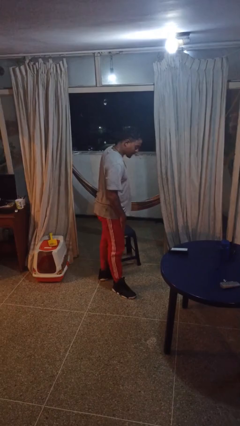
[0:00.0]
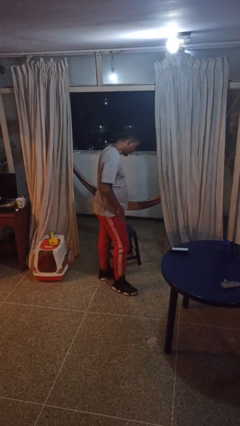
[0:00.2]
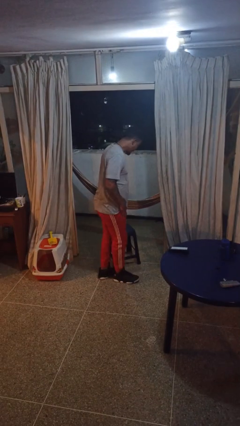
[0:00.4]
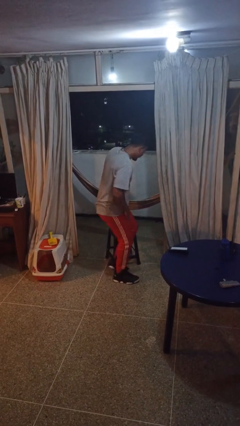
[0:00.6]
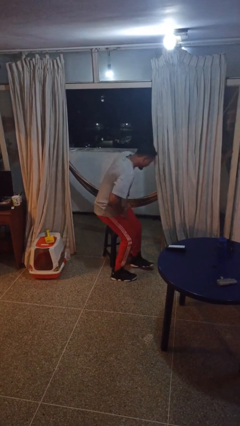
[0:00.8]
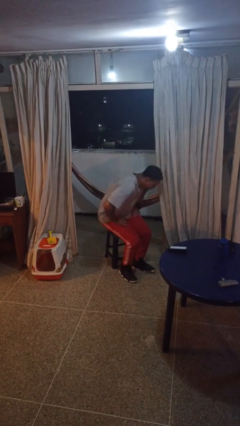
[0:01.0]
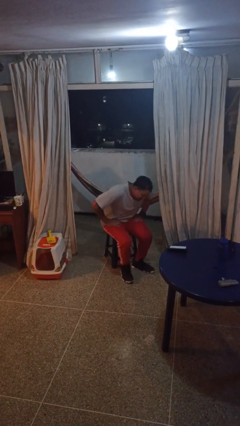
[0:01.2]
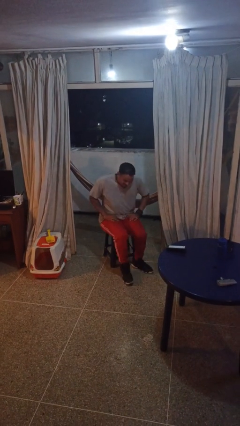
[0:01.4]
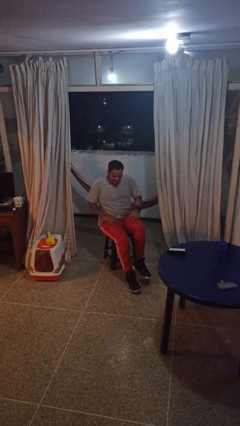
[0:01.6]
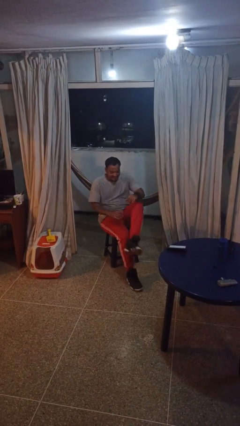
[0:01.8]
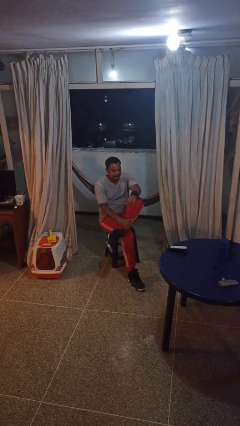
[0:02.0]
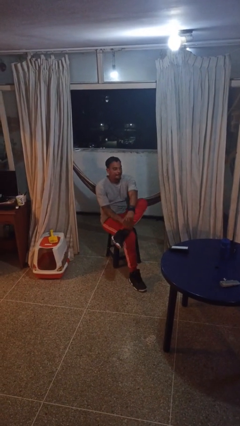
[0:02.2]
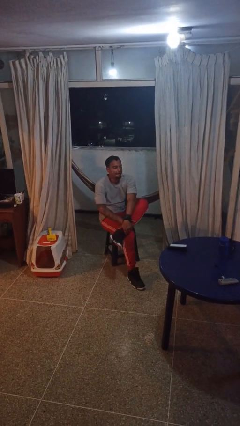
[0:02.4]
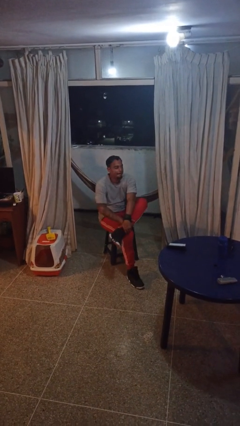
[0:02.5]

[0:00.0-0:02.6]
person sits down

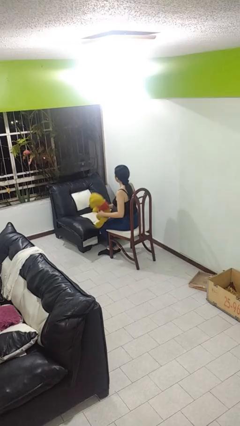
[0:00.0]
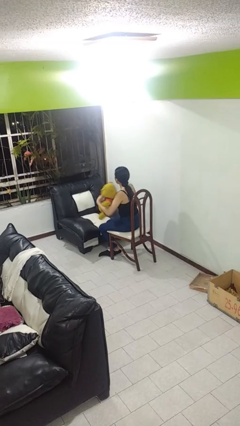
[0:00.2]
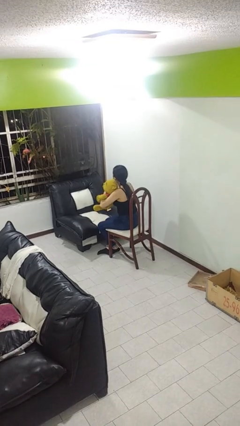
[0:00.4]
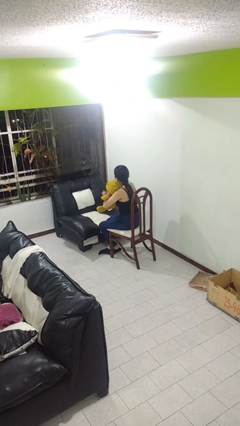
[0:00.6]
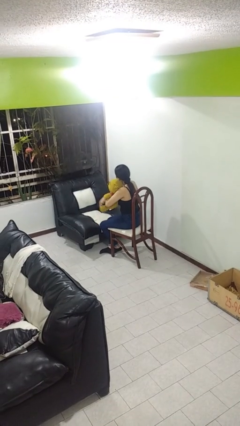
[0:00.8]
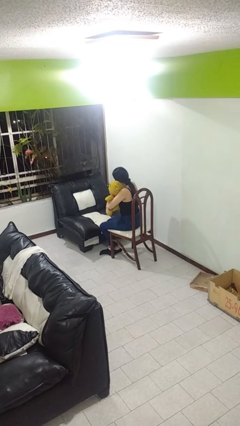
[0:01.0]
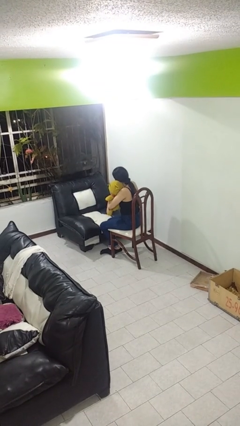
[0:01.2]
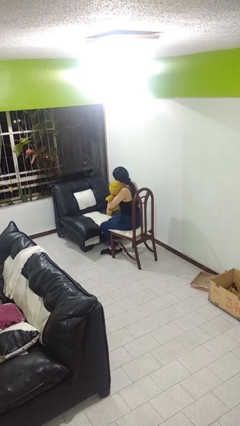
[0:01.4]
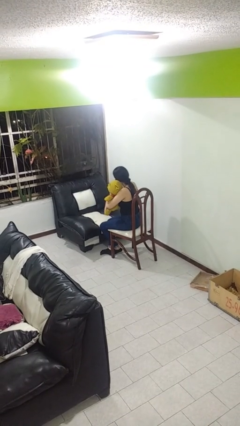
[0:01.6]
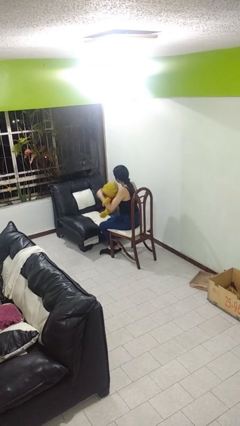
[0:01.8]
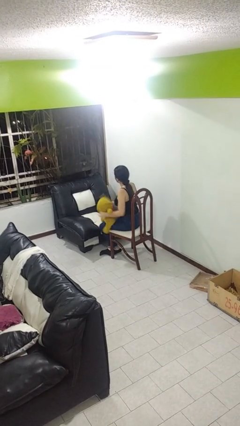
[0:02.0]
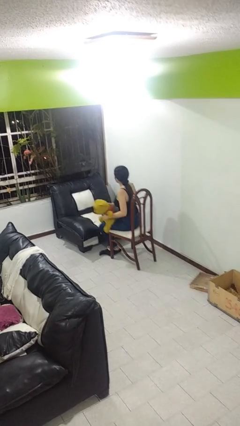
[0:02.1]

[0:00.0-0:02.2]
person hugs stuffed animal

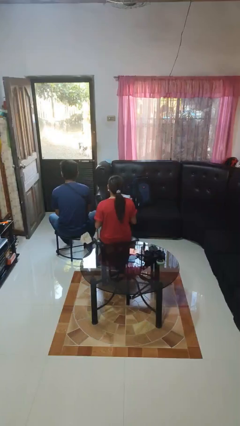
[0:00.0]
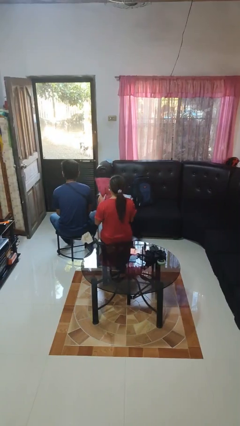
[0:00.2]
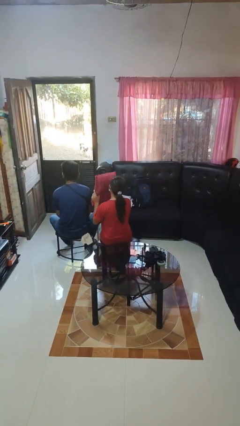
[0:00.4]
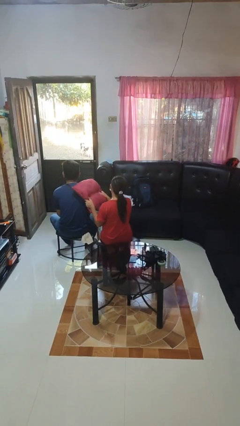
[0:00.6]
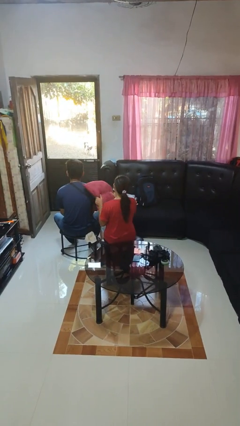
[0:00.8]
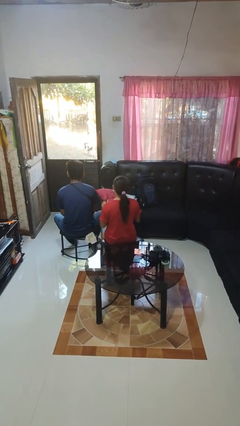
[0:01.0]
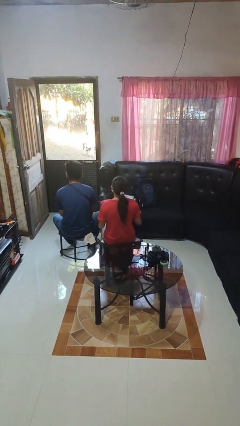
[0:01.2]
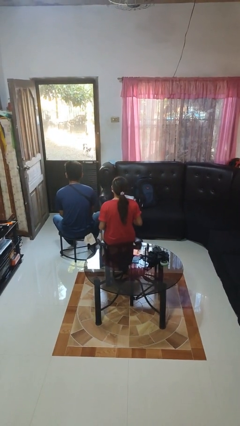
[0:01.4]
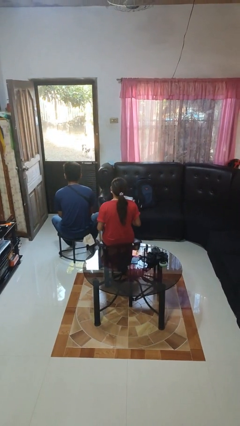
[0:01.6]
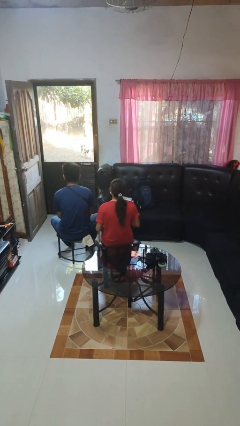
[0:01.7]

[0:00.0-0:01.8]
person hits person with pillow

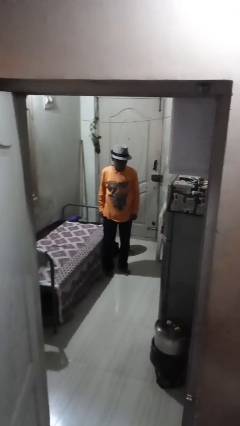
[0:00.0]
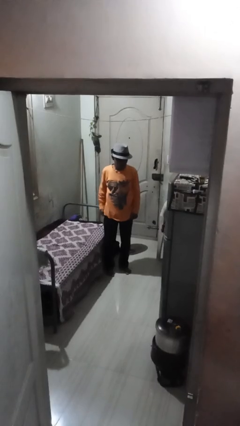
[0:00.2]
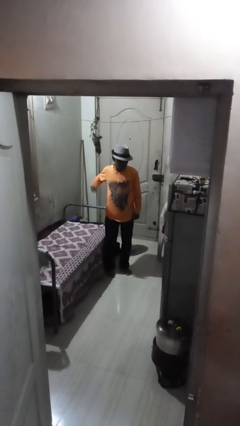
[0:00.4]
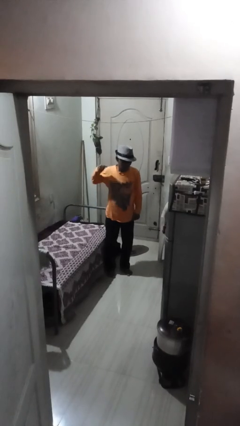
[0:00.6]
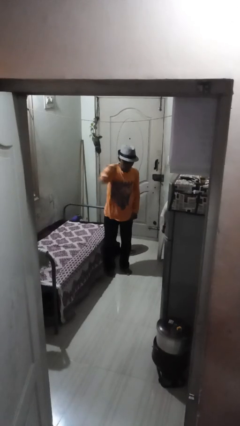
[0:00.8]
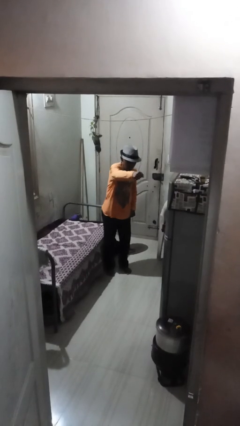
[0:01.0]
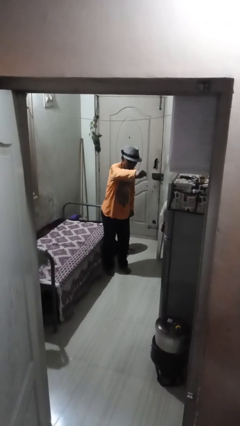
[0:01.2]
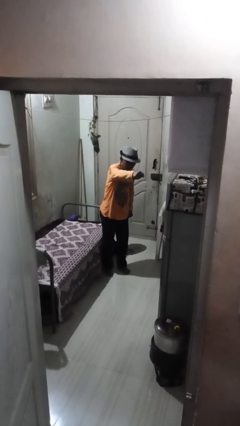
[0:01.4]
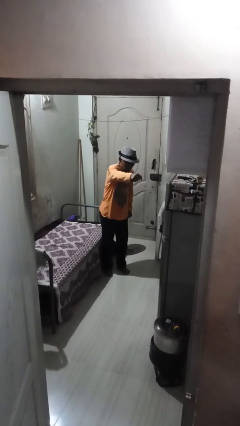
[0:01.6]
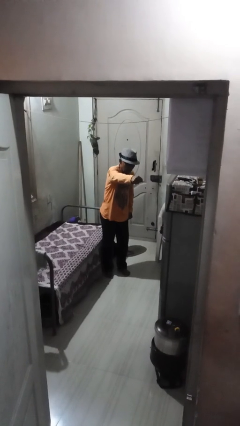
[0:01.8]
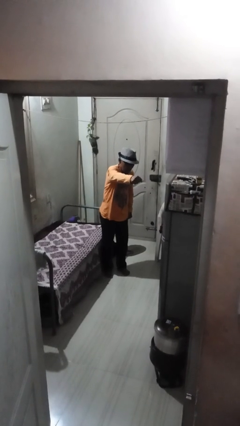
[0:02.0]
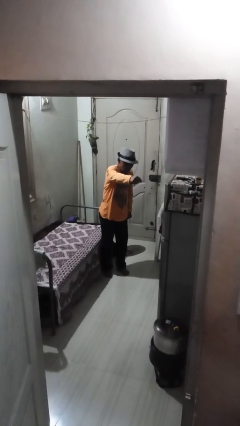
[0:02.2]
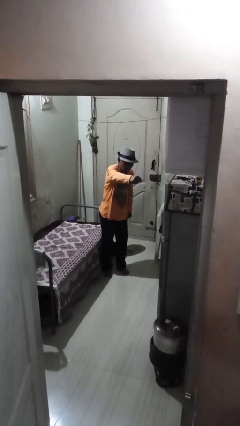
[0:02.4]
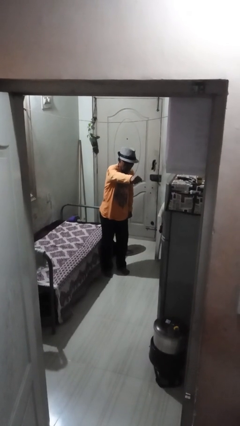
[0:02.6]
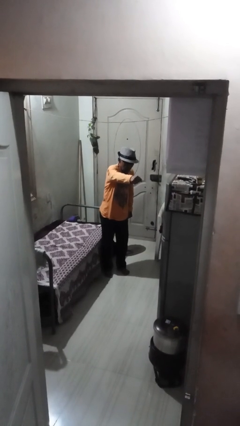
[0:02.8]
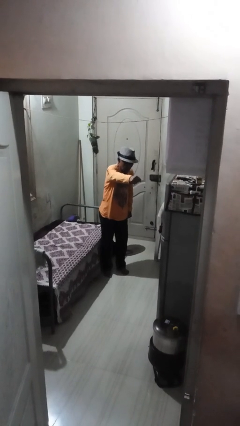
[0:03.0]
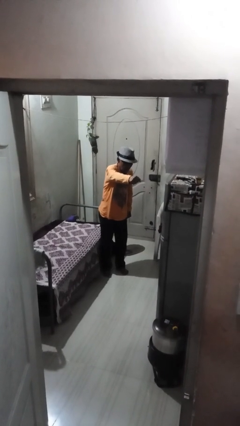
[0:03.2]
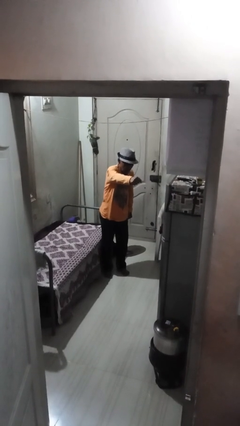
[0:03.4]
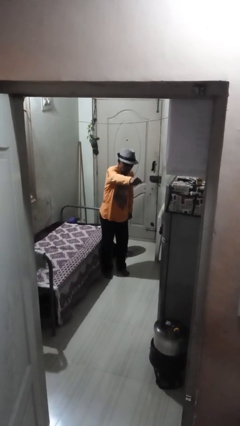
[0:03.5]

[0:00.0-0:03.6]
person punches

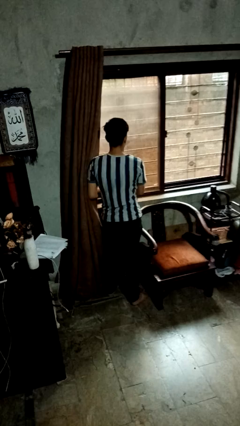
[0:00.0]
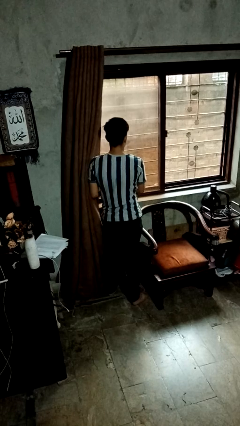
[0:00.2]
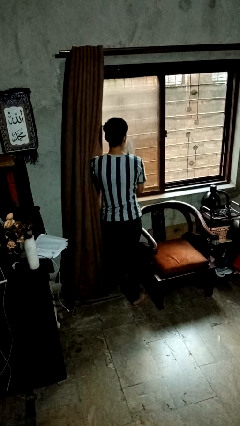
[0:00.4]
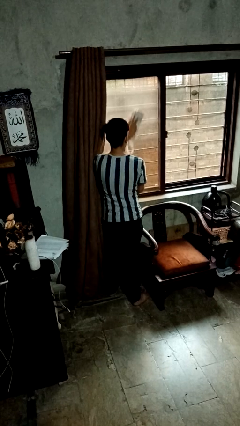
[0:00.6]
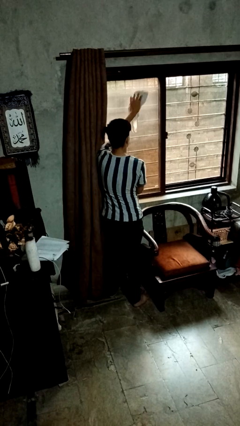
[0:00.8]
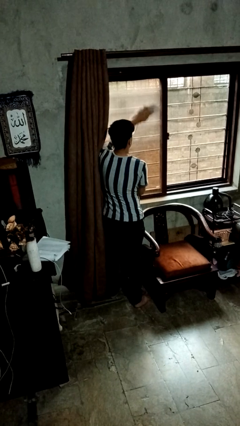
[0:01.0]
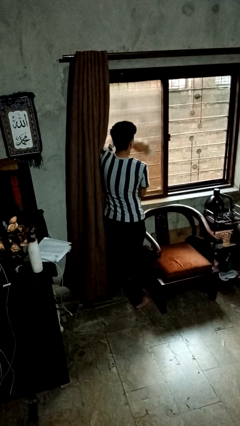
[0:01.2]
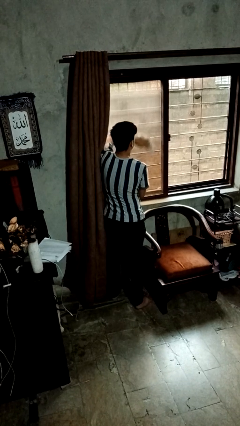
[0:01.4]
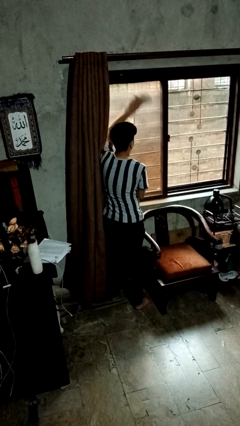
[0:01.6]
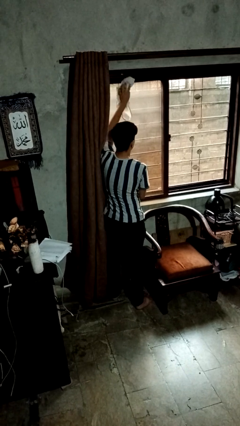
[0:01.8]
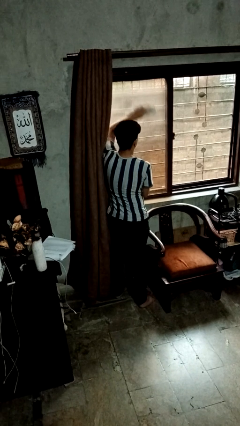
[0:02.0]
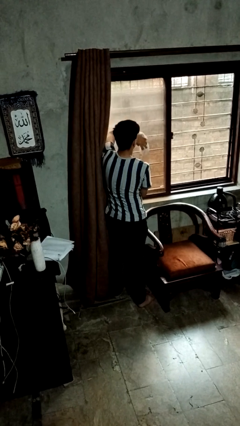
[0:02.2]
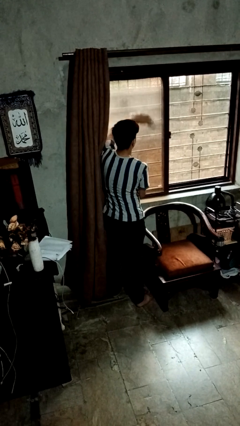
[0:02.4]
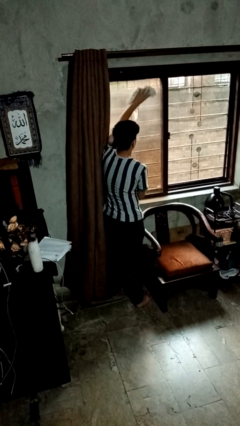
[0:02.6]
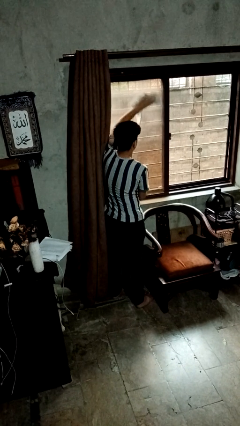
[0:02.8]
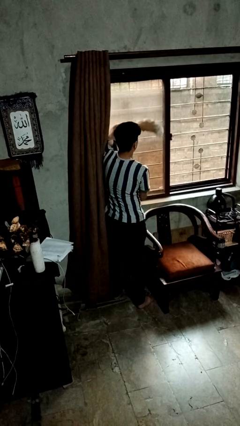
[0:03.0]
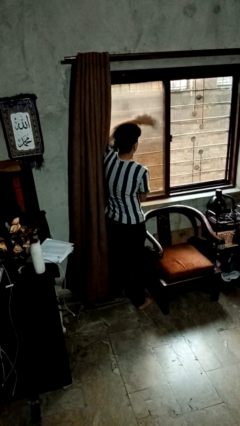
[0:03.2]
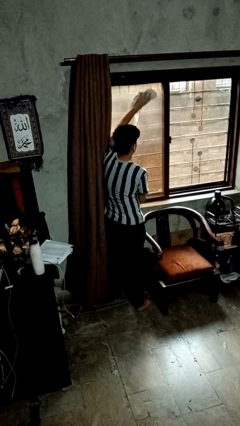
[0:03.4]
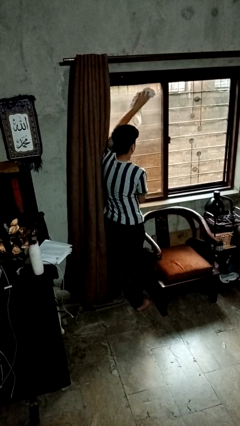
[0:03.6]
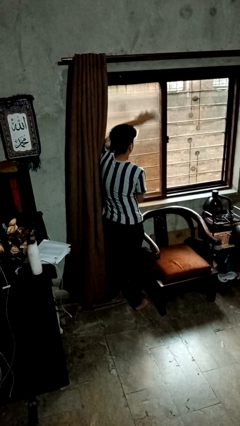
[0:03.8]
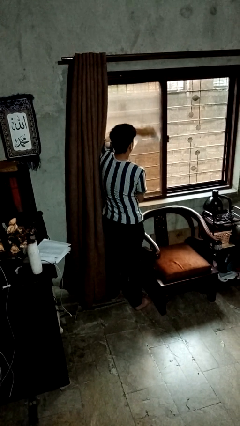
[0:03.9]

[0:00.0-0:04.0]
person washes window

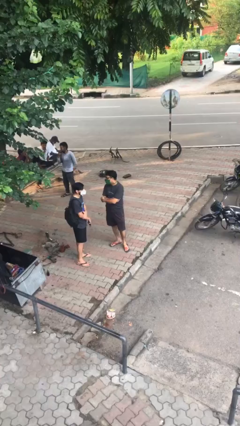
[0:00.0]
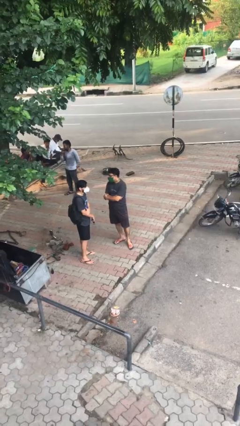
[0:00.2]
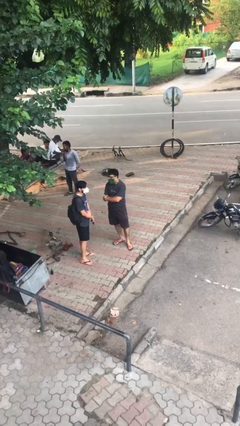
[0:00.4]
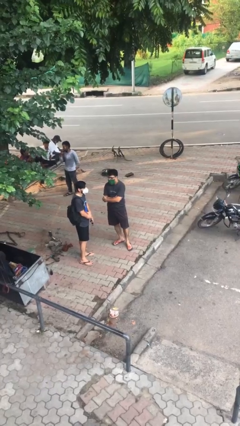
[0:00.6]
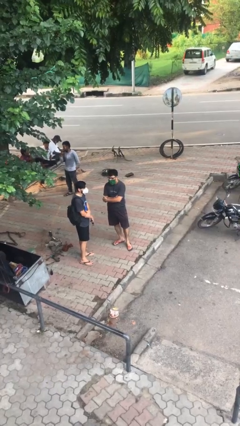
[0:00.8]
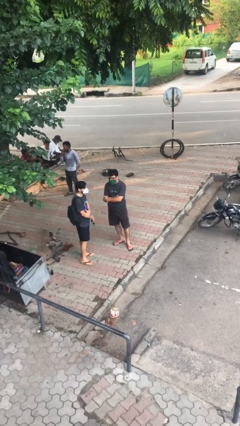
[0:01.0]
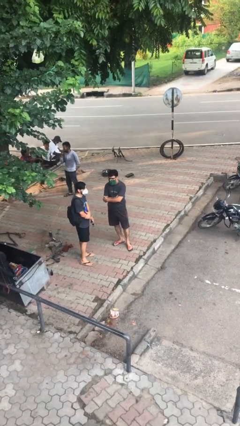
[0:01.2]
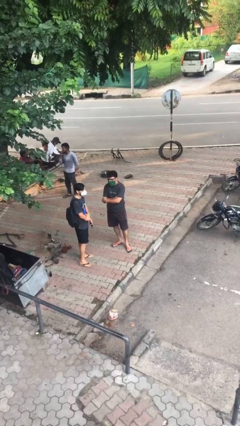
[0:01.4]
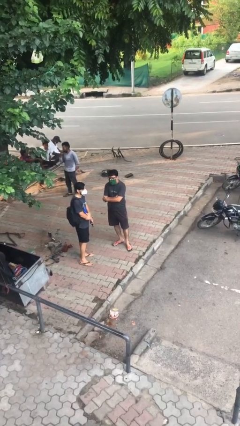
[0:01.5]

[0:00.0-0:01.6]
person talks to person

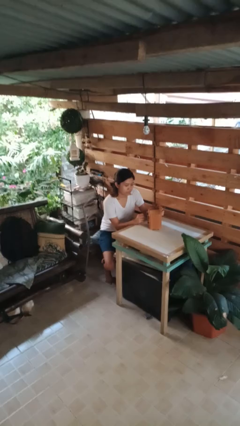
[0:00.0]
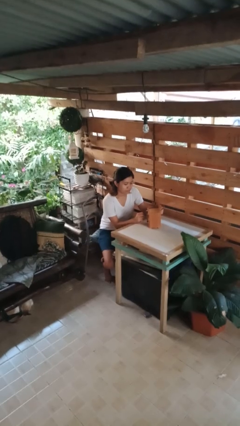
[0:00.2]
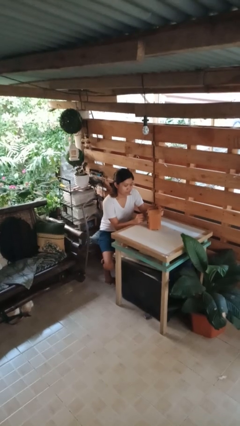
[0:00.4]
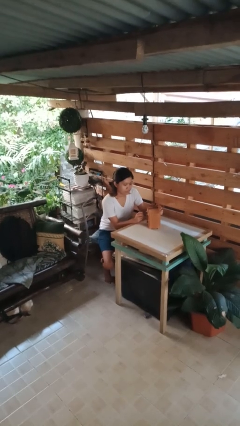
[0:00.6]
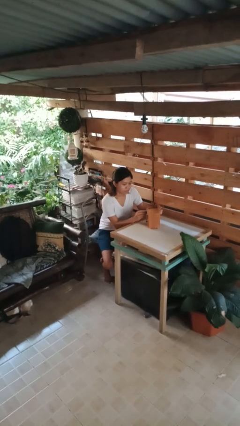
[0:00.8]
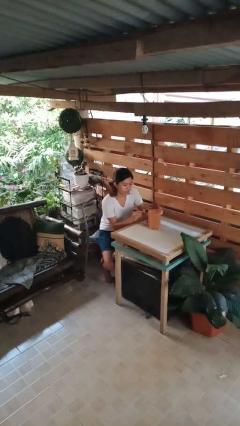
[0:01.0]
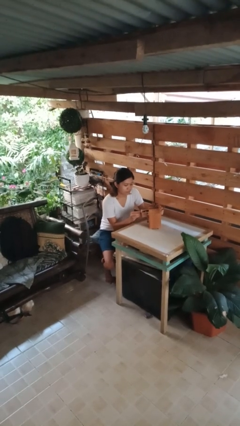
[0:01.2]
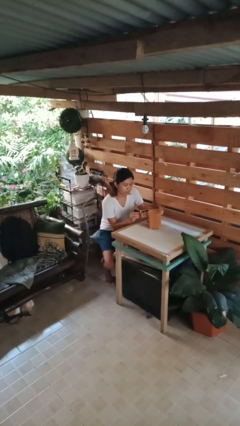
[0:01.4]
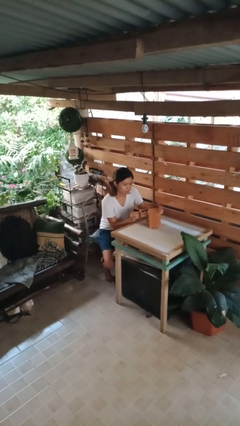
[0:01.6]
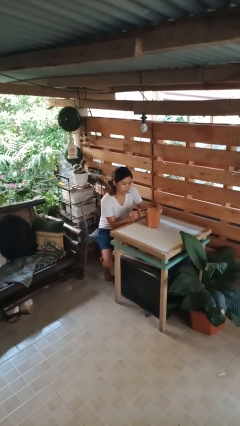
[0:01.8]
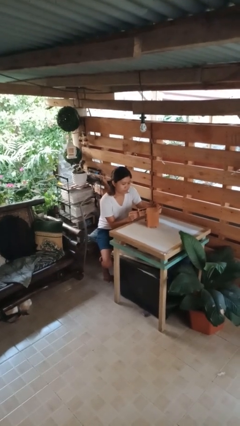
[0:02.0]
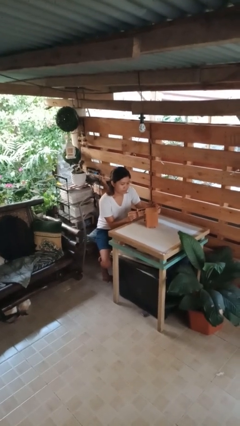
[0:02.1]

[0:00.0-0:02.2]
person opens jewelry box
